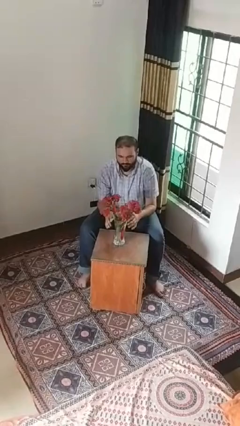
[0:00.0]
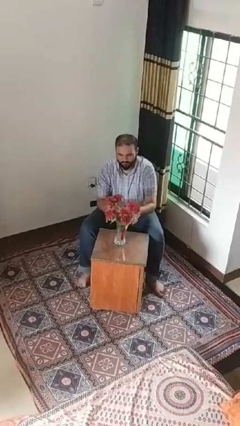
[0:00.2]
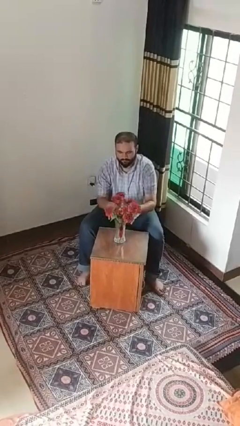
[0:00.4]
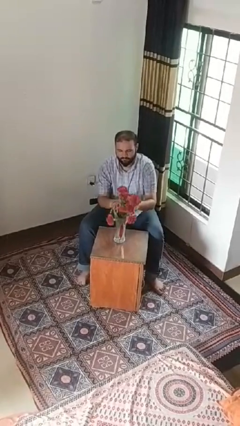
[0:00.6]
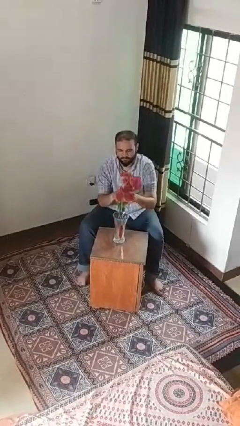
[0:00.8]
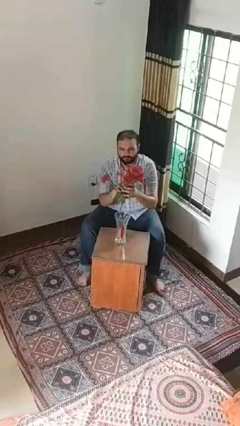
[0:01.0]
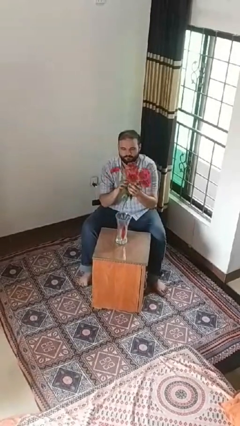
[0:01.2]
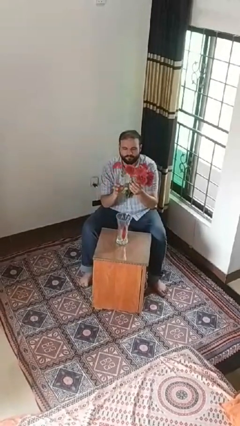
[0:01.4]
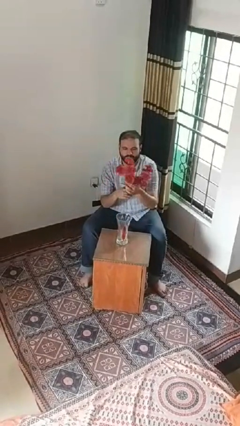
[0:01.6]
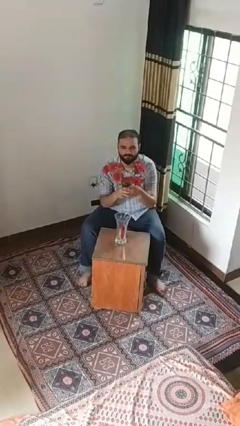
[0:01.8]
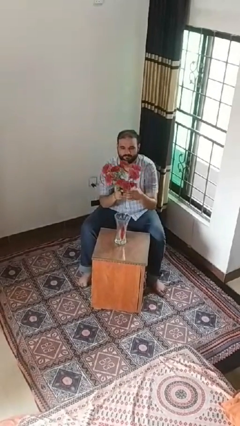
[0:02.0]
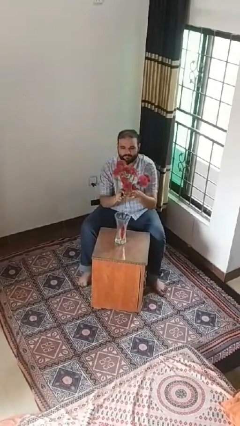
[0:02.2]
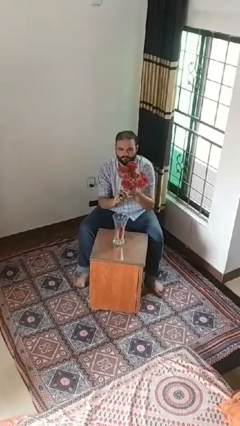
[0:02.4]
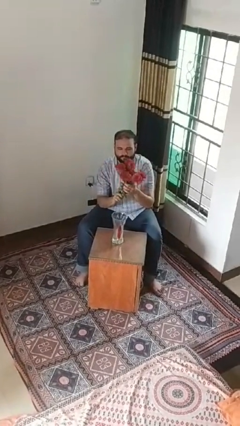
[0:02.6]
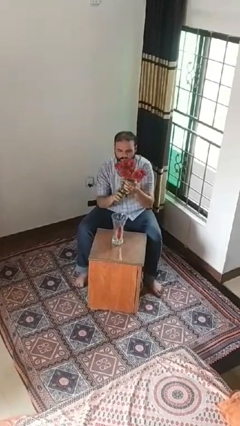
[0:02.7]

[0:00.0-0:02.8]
person arranges flowers in vase

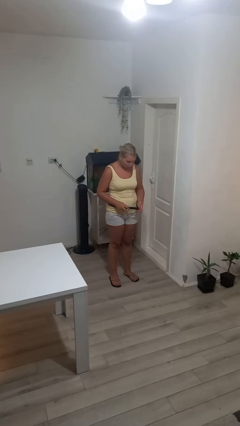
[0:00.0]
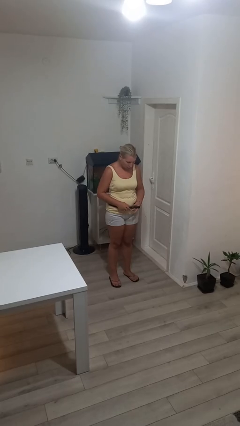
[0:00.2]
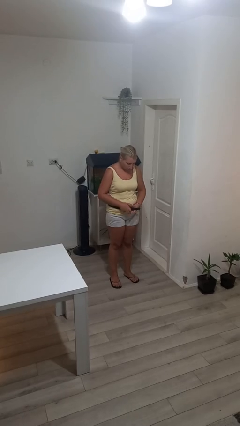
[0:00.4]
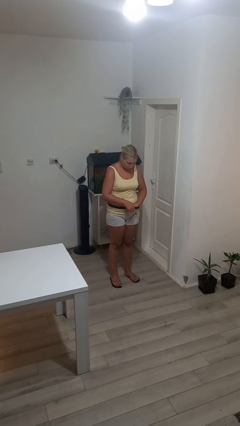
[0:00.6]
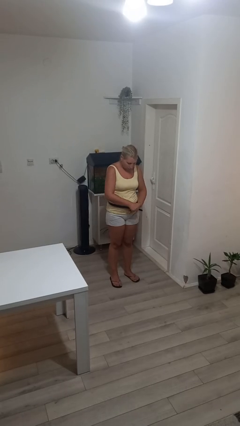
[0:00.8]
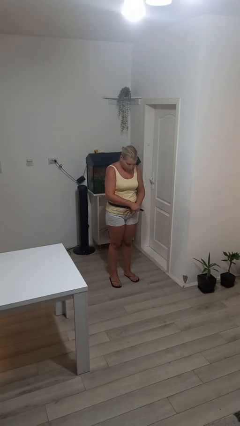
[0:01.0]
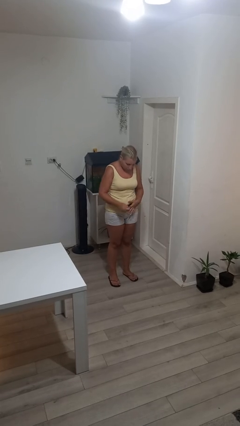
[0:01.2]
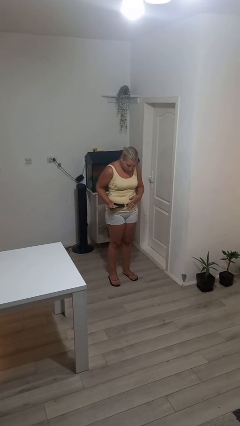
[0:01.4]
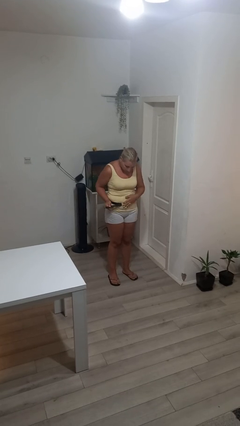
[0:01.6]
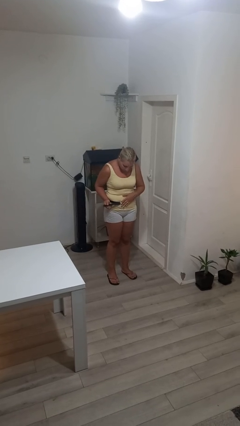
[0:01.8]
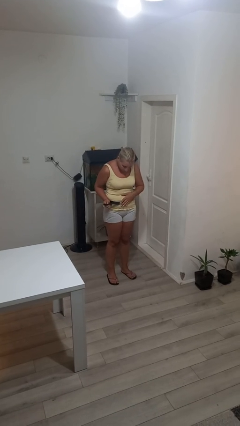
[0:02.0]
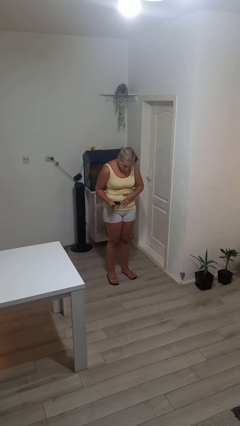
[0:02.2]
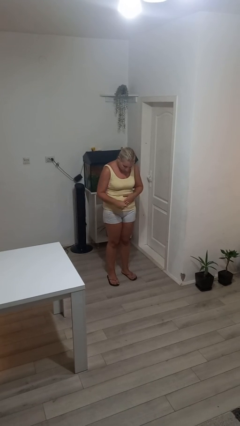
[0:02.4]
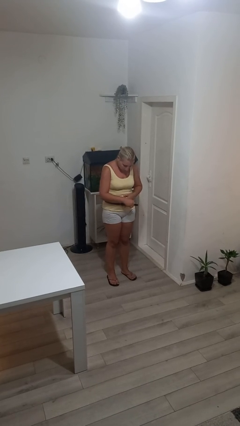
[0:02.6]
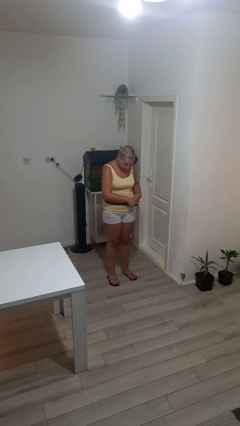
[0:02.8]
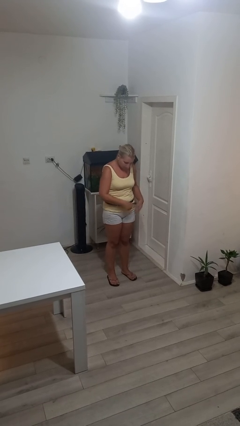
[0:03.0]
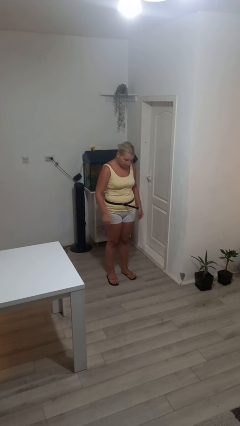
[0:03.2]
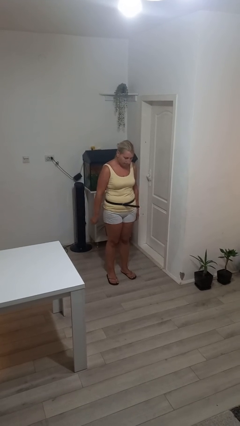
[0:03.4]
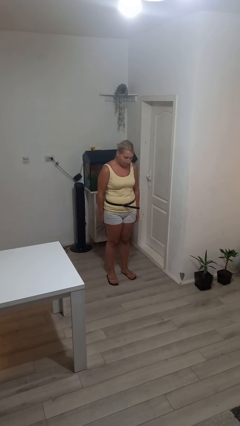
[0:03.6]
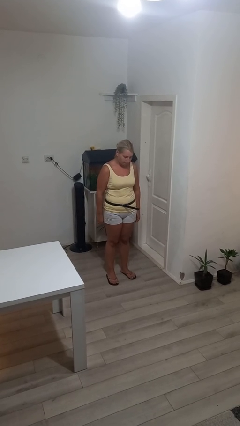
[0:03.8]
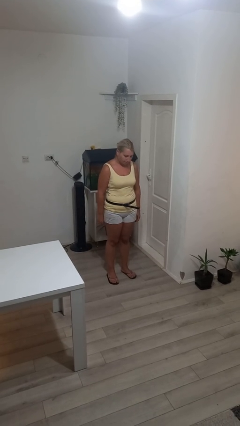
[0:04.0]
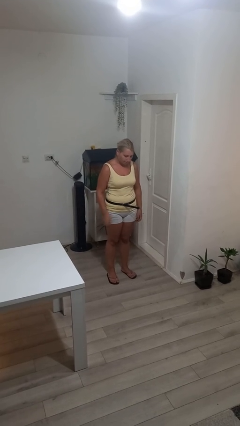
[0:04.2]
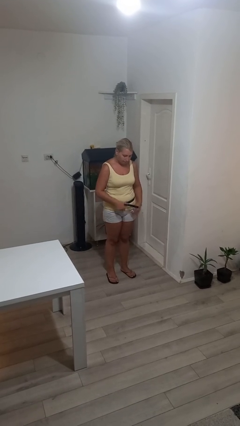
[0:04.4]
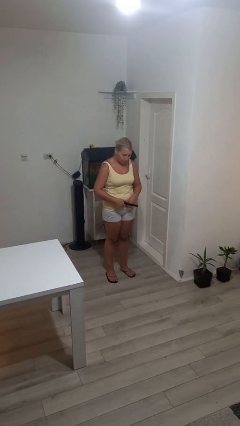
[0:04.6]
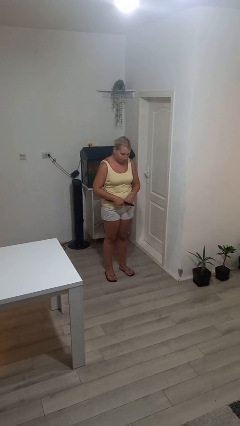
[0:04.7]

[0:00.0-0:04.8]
person puts on belt

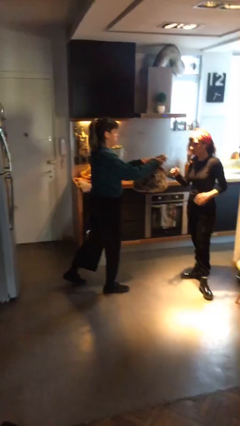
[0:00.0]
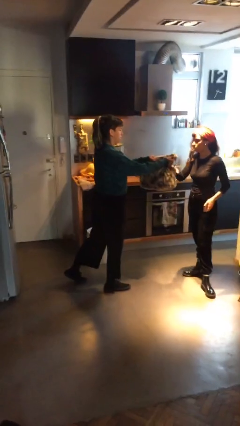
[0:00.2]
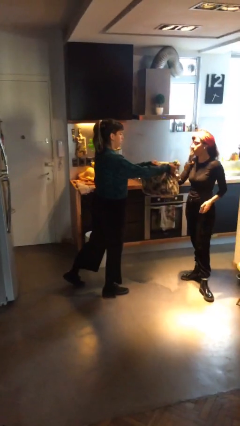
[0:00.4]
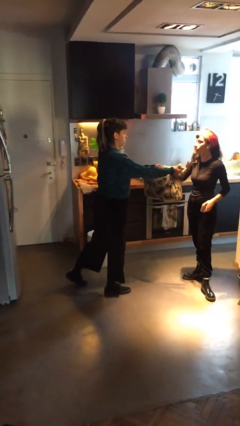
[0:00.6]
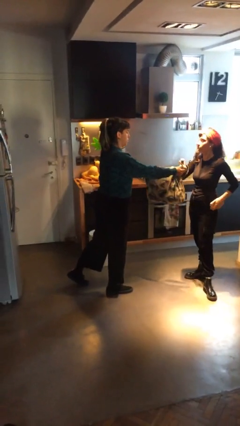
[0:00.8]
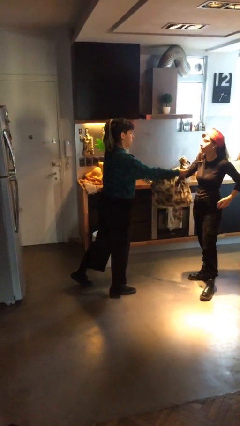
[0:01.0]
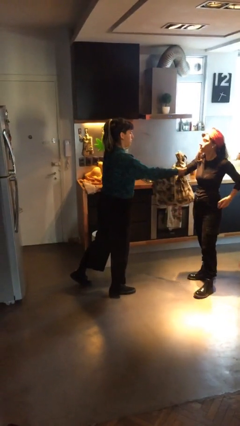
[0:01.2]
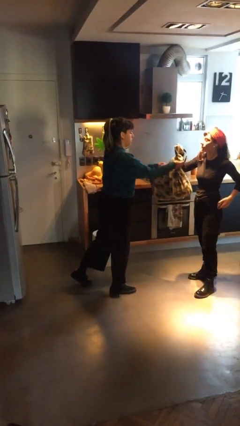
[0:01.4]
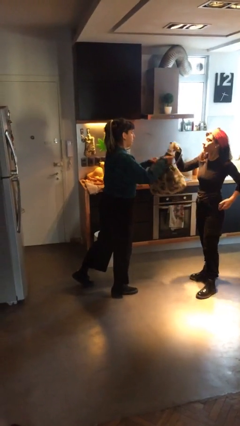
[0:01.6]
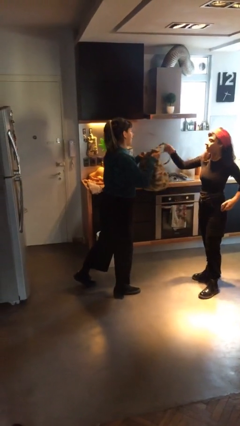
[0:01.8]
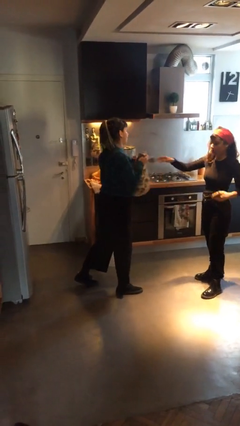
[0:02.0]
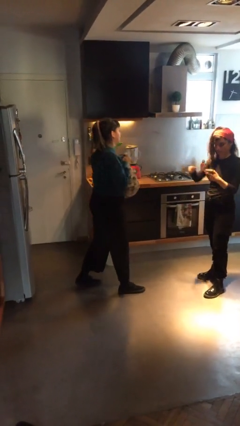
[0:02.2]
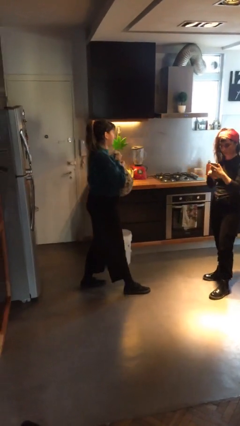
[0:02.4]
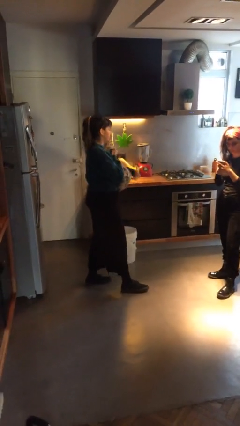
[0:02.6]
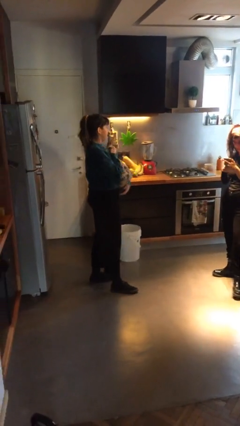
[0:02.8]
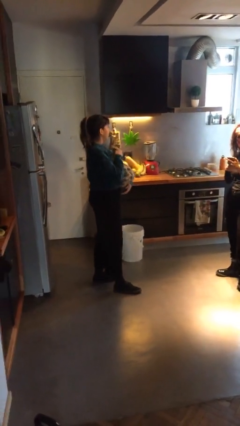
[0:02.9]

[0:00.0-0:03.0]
person transfers object to person

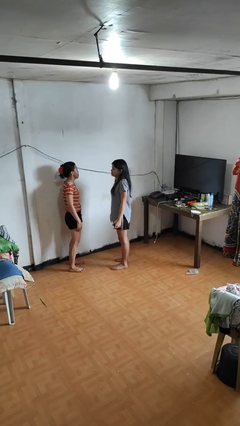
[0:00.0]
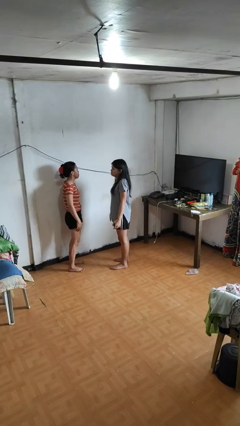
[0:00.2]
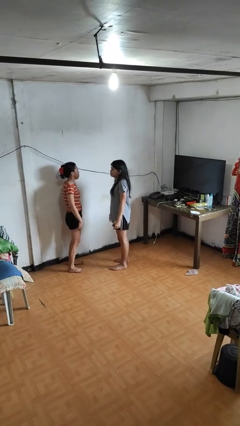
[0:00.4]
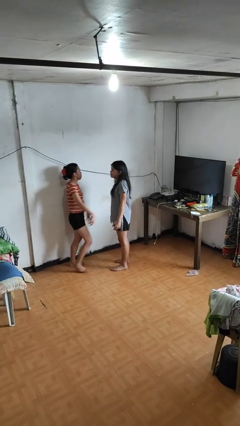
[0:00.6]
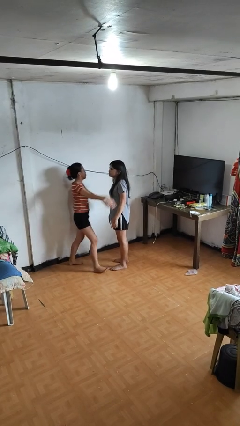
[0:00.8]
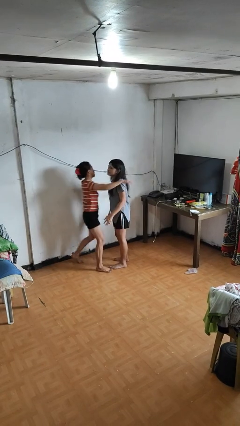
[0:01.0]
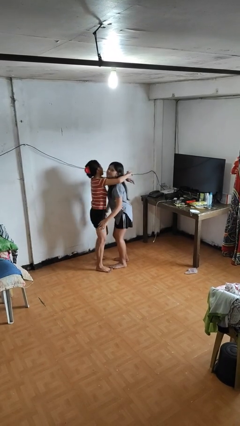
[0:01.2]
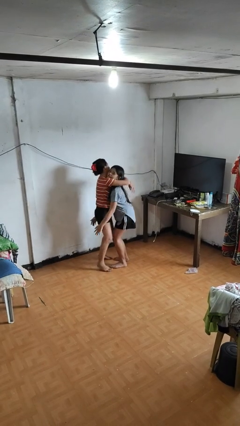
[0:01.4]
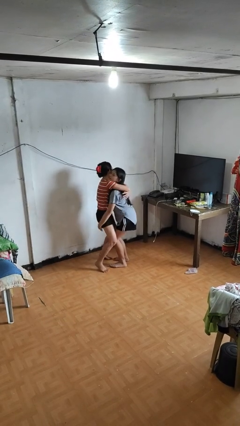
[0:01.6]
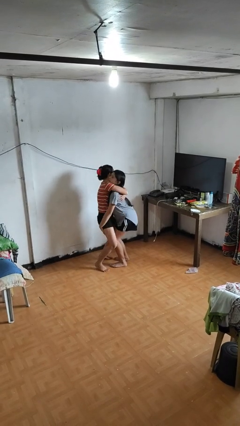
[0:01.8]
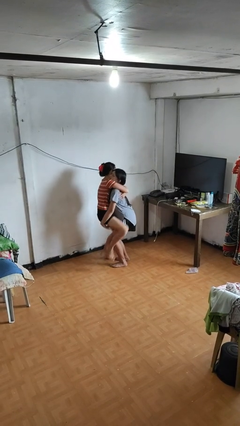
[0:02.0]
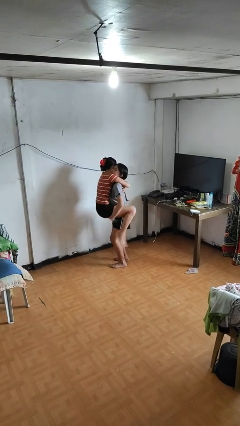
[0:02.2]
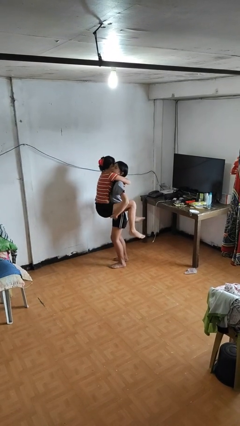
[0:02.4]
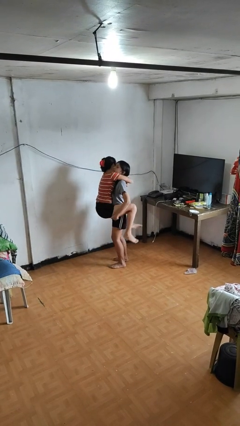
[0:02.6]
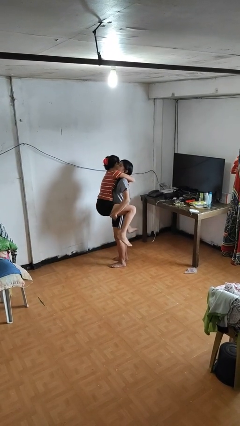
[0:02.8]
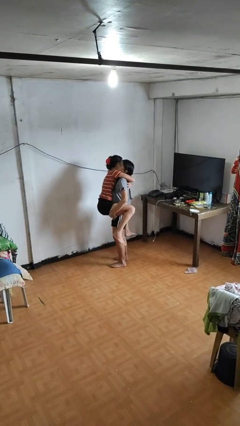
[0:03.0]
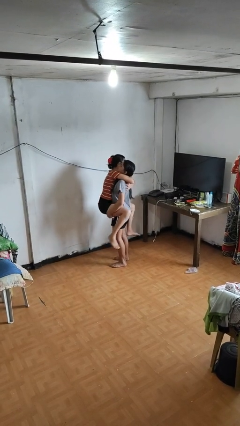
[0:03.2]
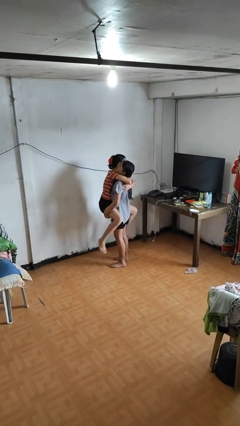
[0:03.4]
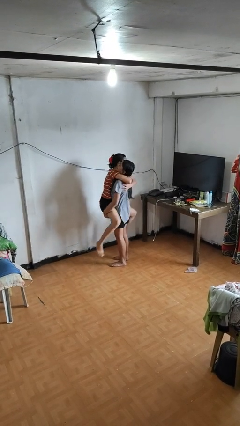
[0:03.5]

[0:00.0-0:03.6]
person picks up person

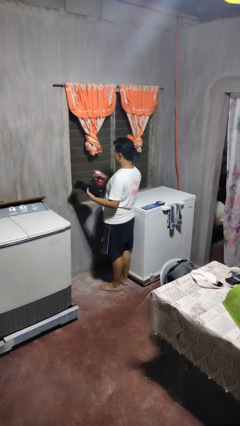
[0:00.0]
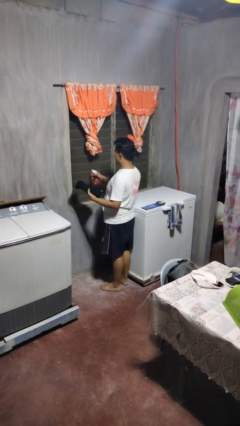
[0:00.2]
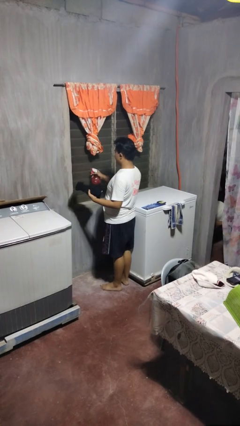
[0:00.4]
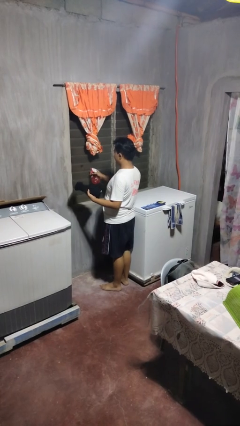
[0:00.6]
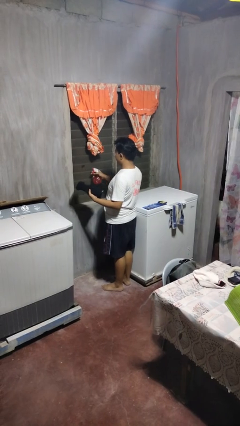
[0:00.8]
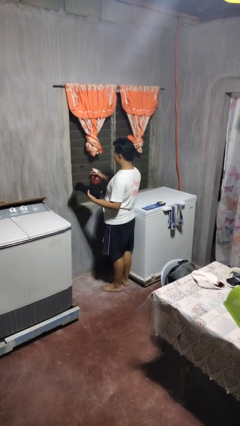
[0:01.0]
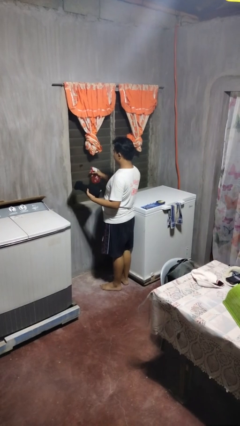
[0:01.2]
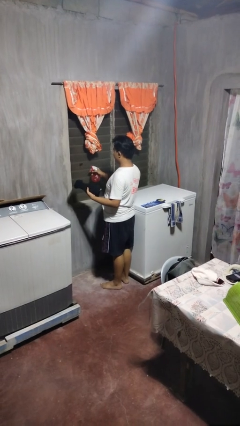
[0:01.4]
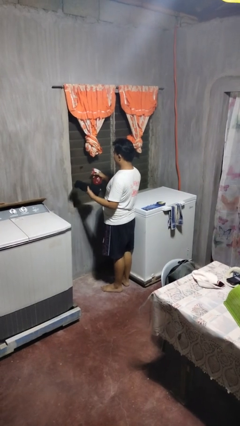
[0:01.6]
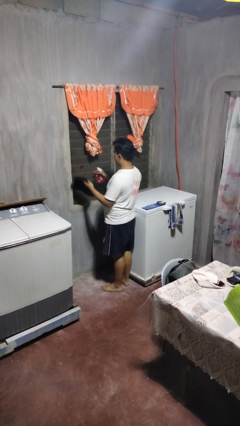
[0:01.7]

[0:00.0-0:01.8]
person sprays from bottle

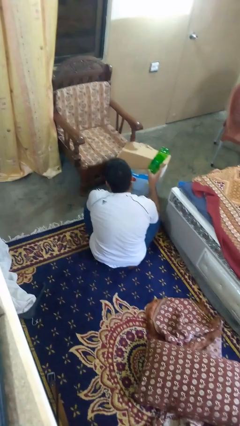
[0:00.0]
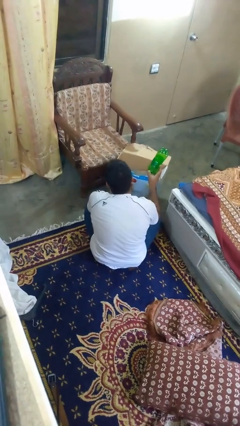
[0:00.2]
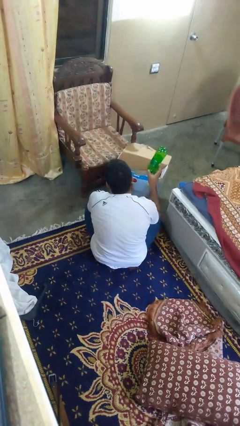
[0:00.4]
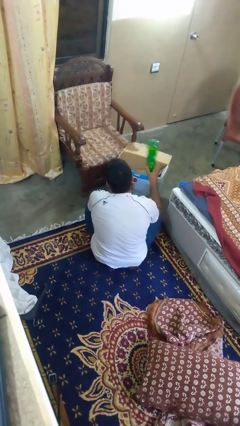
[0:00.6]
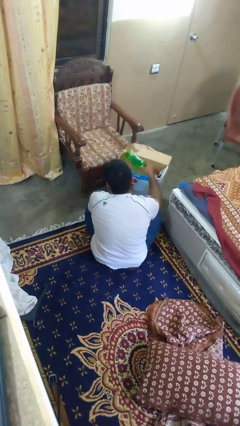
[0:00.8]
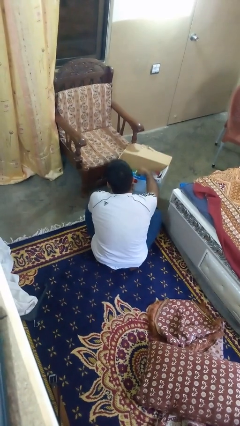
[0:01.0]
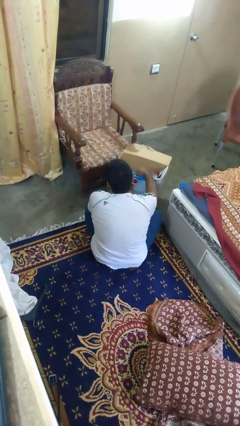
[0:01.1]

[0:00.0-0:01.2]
person puts object into box

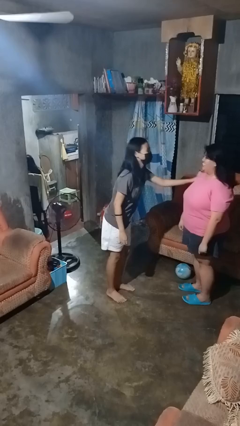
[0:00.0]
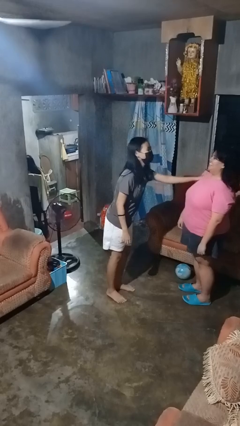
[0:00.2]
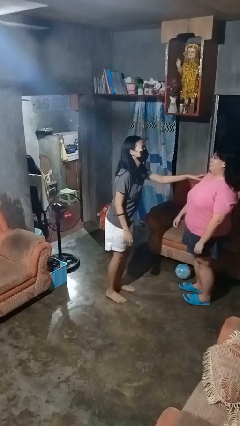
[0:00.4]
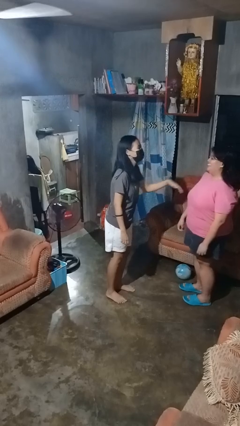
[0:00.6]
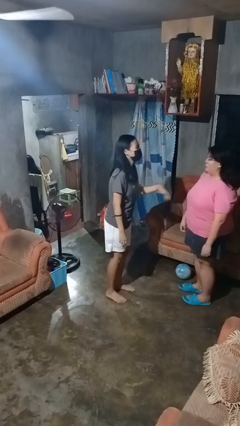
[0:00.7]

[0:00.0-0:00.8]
person shoves person
